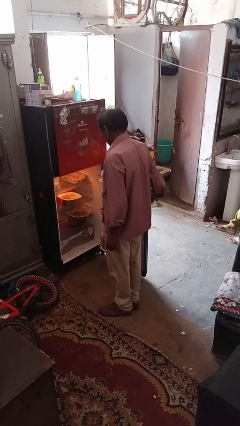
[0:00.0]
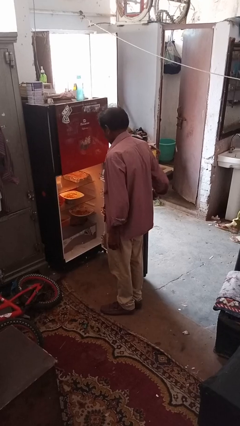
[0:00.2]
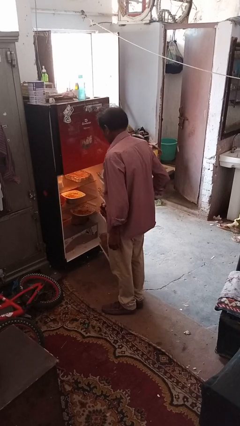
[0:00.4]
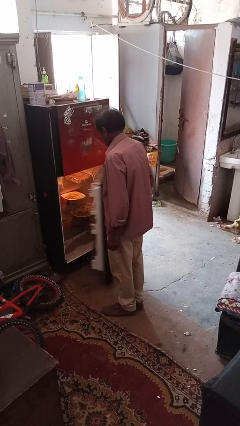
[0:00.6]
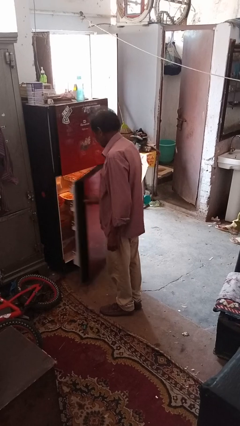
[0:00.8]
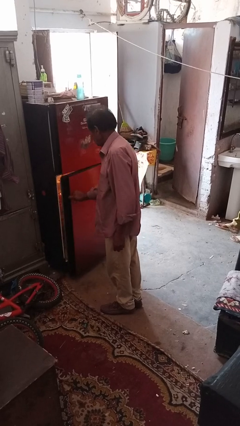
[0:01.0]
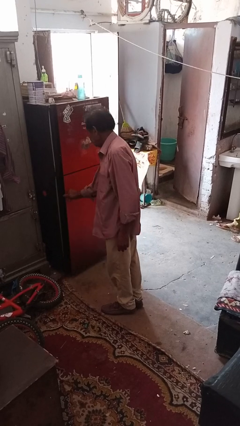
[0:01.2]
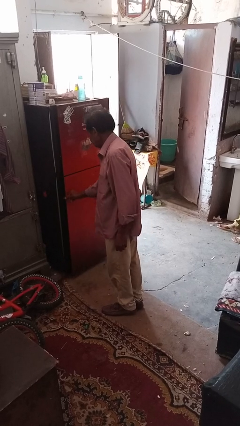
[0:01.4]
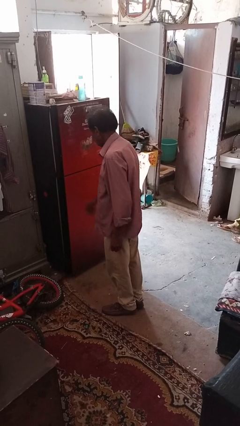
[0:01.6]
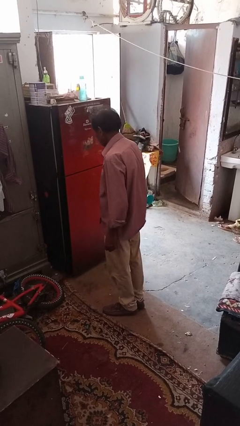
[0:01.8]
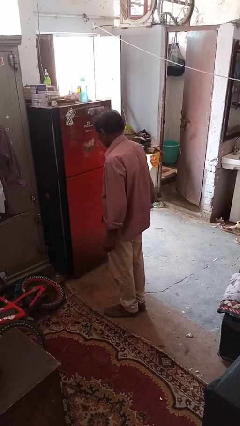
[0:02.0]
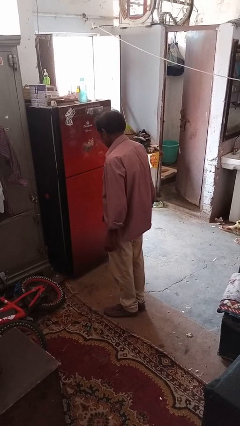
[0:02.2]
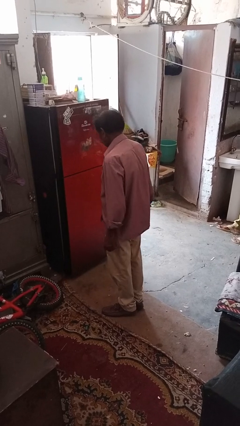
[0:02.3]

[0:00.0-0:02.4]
person closes refrigerator

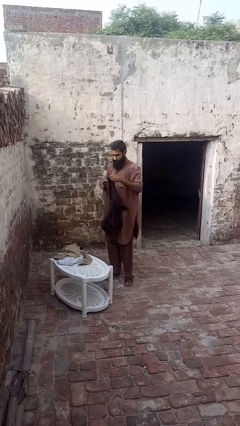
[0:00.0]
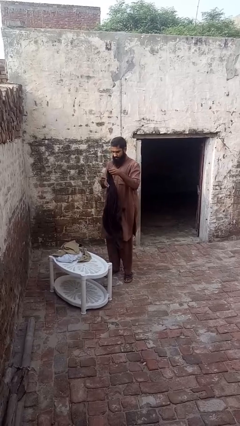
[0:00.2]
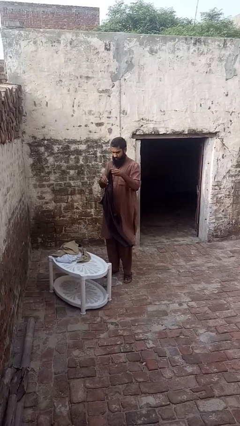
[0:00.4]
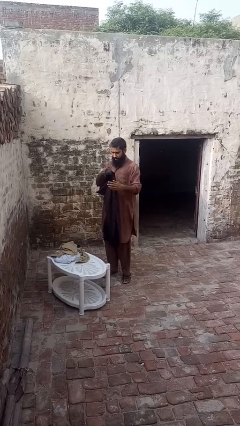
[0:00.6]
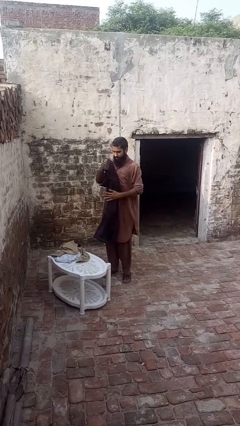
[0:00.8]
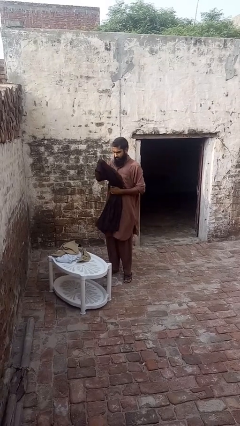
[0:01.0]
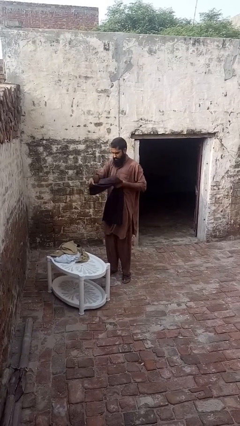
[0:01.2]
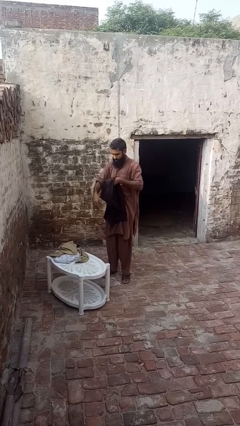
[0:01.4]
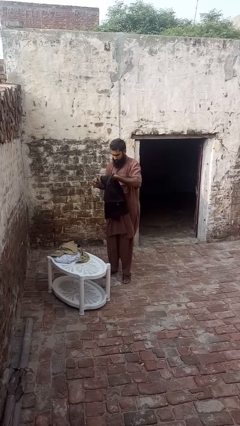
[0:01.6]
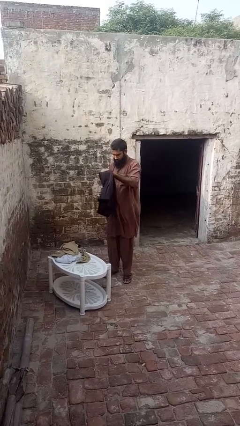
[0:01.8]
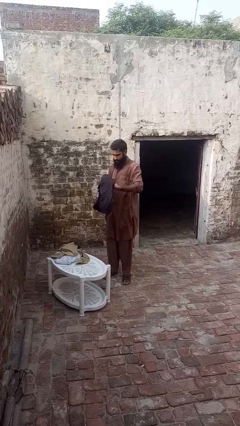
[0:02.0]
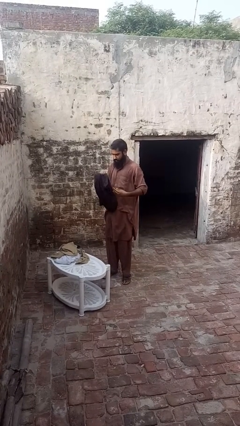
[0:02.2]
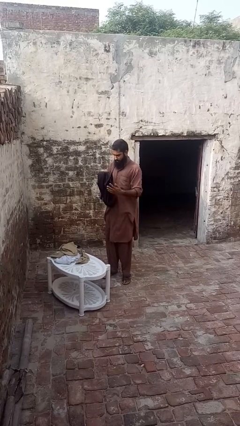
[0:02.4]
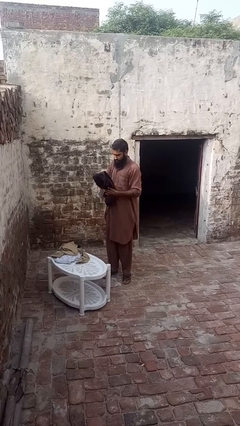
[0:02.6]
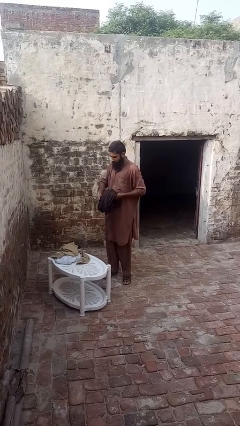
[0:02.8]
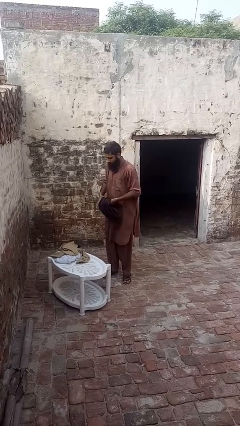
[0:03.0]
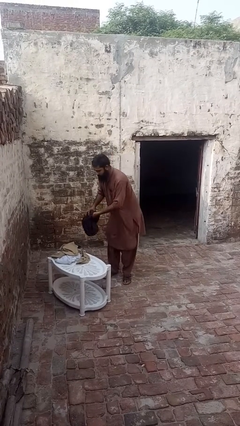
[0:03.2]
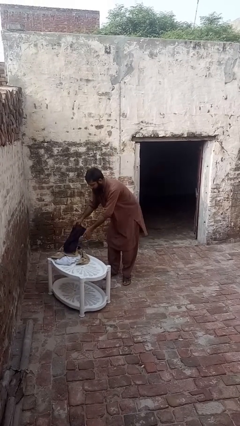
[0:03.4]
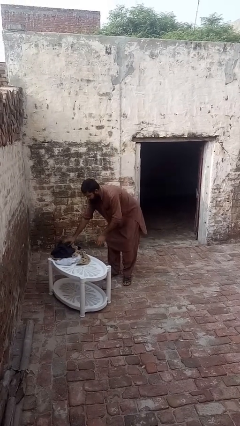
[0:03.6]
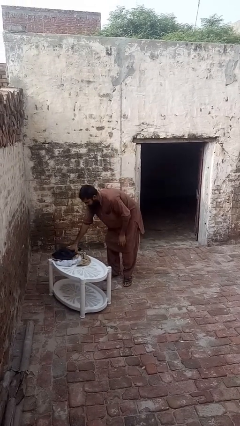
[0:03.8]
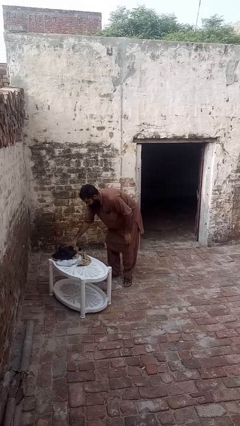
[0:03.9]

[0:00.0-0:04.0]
person folds pants

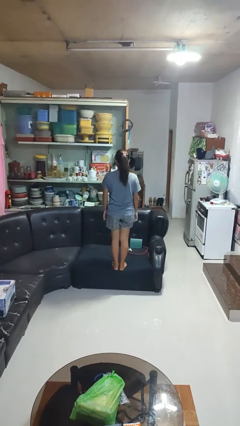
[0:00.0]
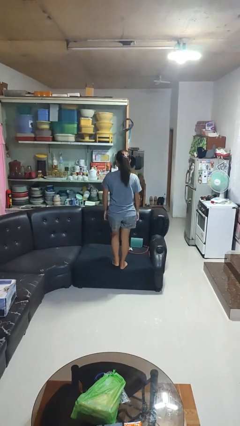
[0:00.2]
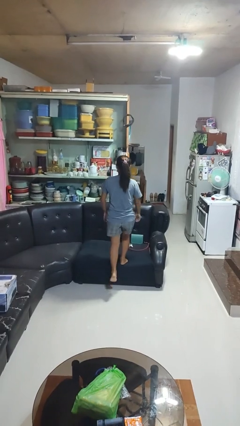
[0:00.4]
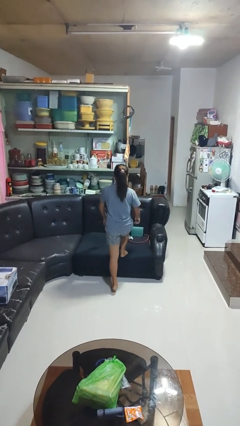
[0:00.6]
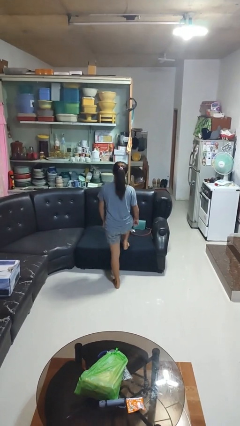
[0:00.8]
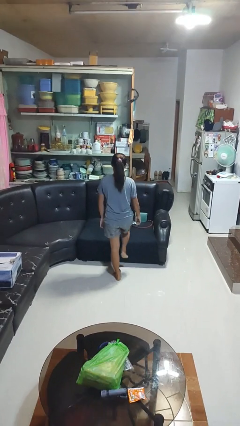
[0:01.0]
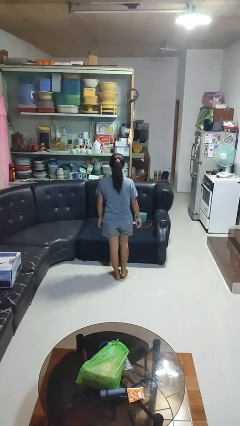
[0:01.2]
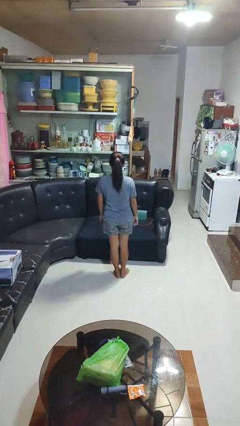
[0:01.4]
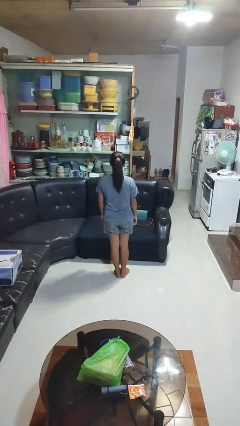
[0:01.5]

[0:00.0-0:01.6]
person climbs off couch

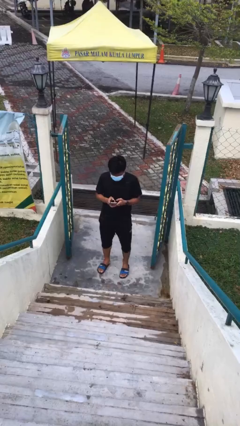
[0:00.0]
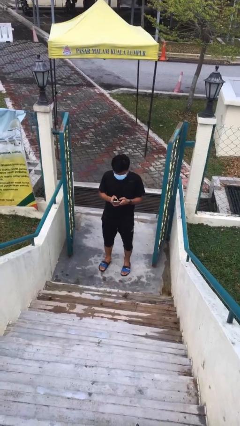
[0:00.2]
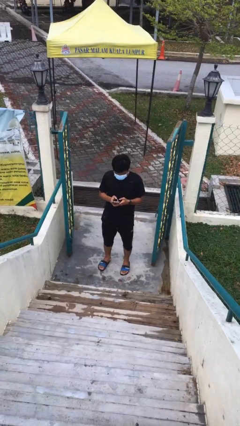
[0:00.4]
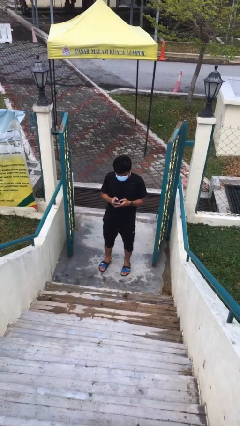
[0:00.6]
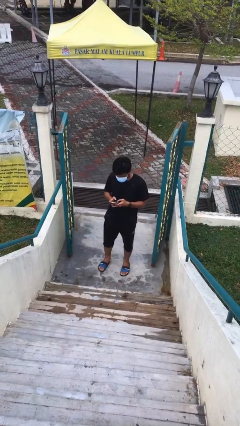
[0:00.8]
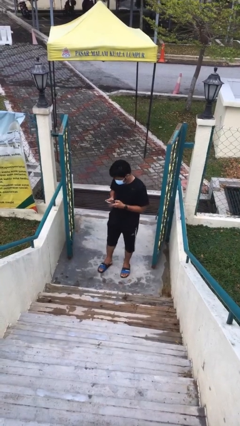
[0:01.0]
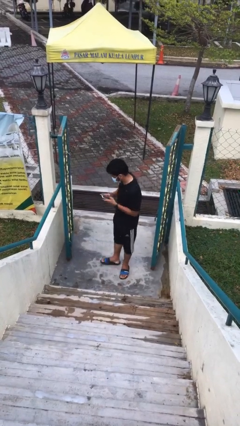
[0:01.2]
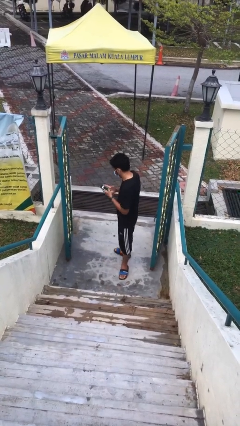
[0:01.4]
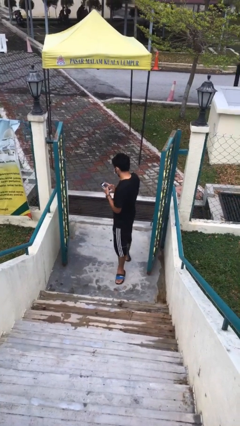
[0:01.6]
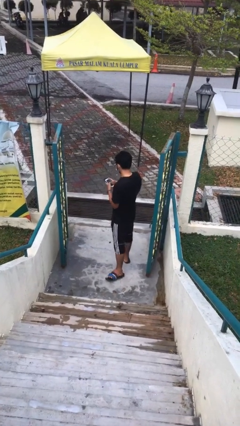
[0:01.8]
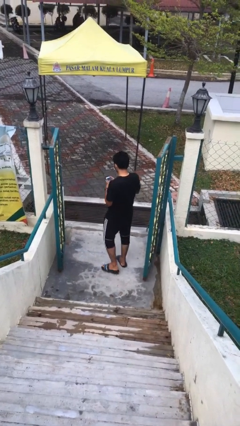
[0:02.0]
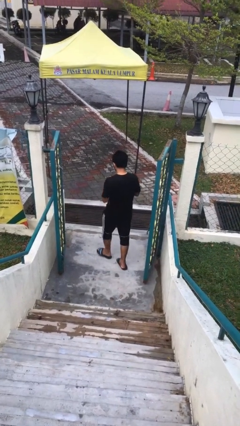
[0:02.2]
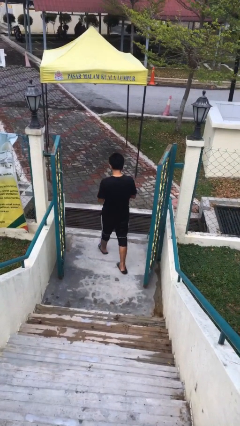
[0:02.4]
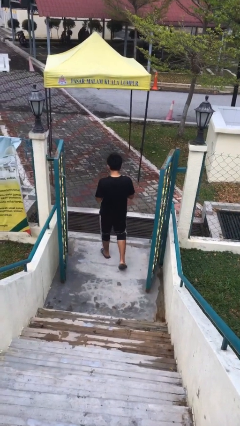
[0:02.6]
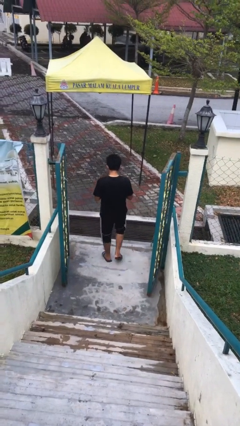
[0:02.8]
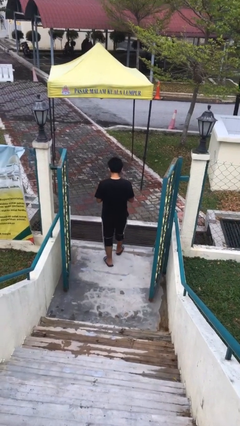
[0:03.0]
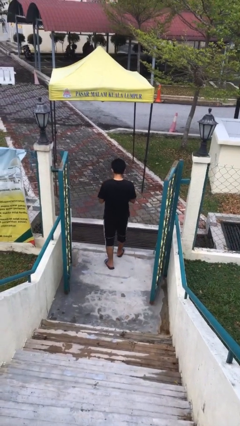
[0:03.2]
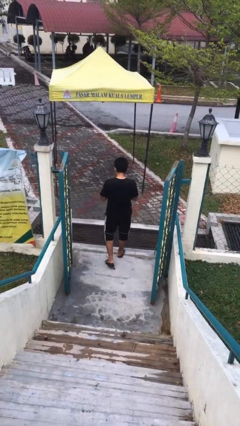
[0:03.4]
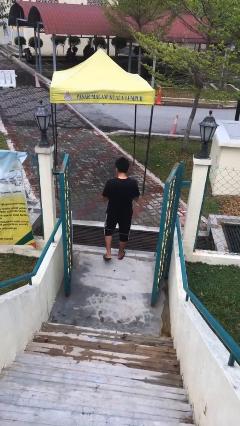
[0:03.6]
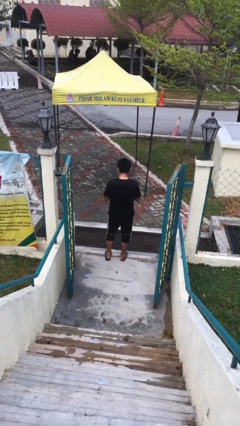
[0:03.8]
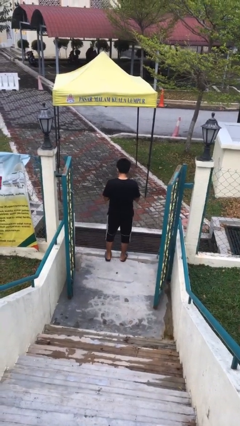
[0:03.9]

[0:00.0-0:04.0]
person exits scene through structure

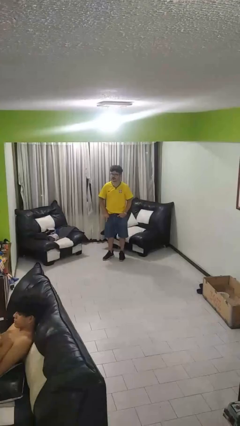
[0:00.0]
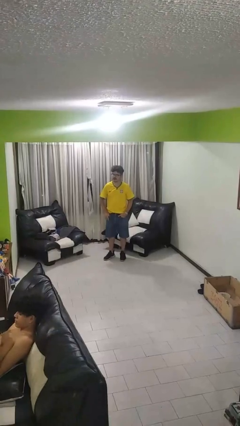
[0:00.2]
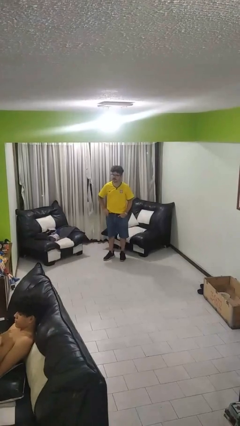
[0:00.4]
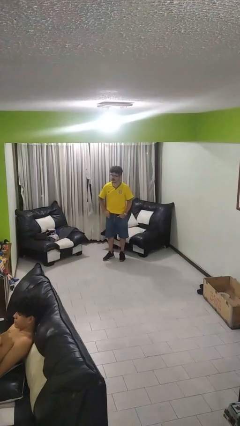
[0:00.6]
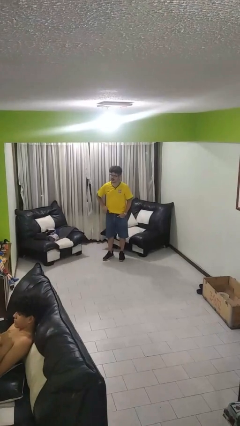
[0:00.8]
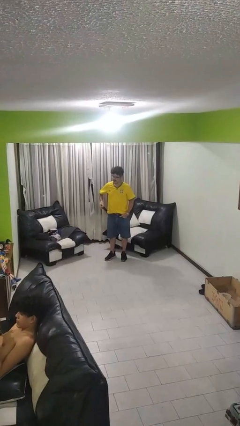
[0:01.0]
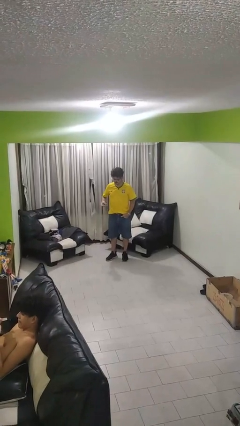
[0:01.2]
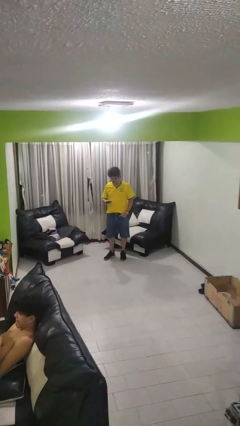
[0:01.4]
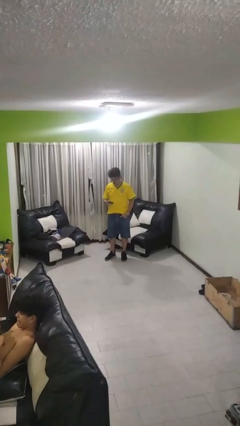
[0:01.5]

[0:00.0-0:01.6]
person takes phone from pocket

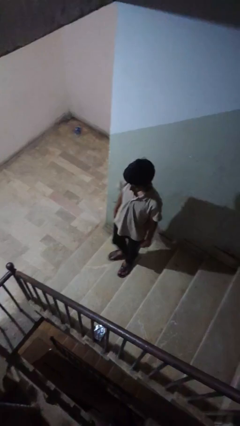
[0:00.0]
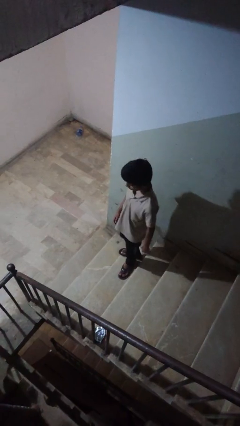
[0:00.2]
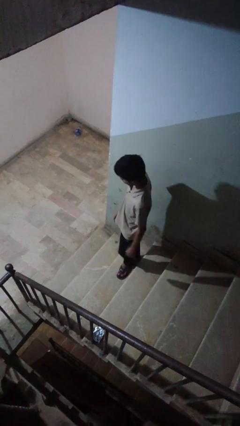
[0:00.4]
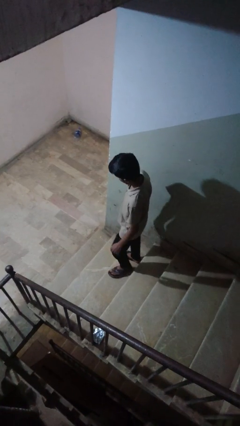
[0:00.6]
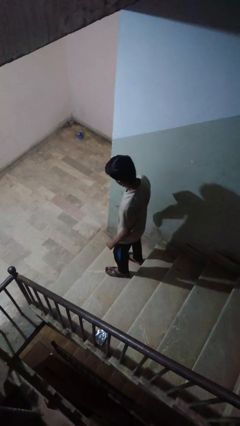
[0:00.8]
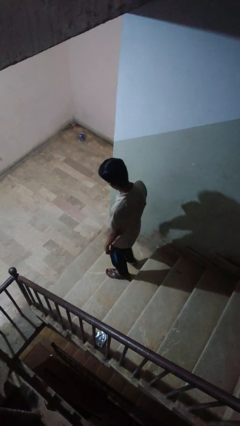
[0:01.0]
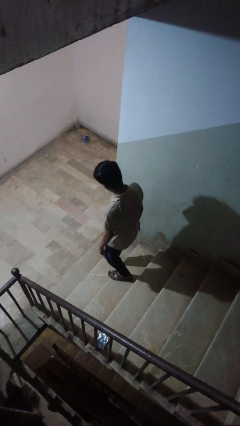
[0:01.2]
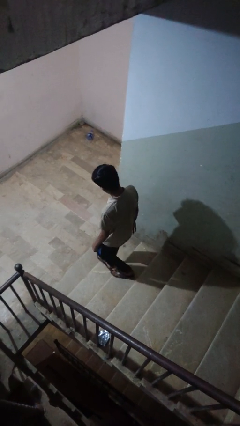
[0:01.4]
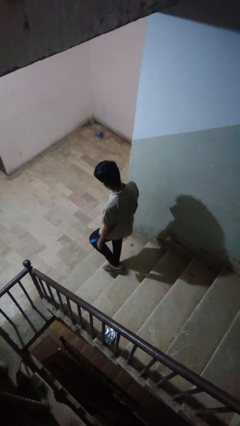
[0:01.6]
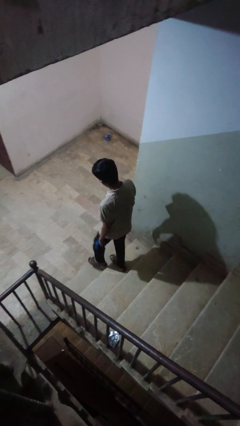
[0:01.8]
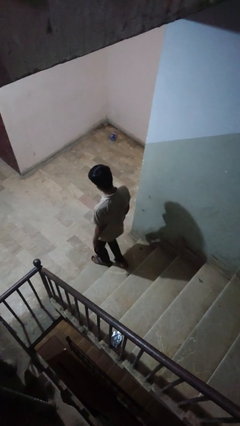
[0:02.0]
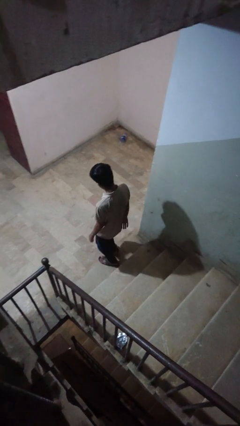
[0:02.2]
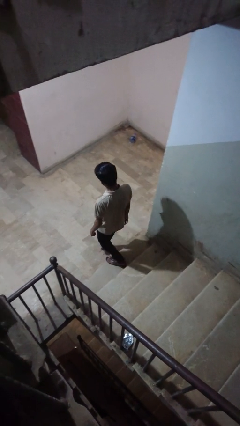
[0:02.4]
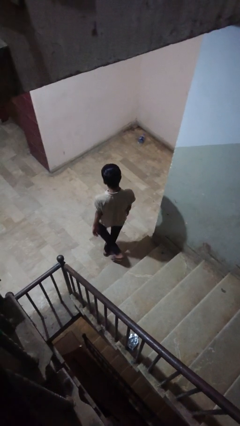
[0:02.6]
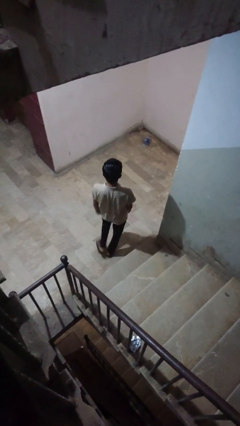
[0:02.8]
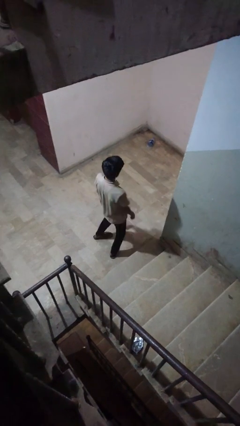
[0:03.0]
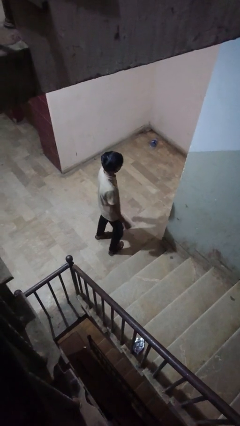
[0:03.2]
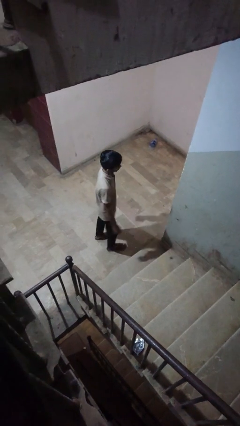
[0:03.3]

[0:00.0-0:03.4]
person climbs down stairs

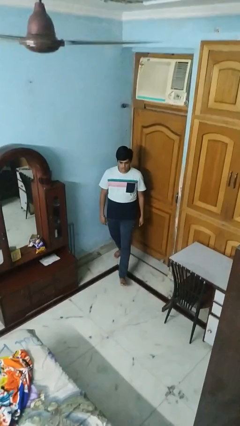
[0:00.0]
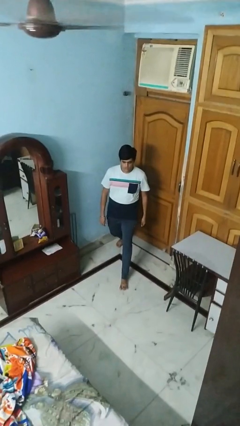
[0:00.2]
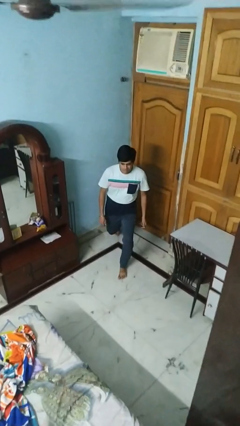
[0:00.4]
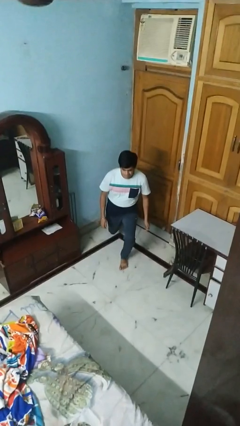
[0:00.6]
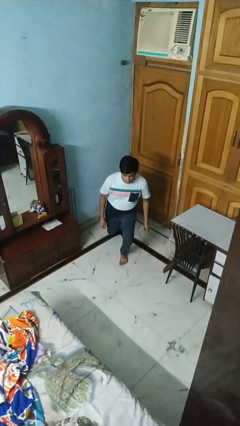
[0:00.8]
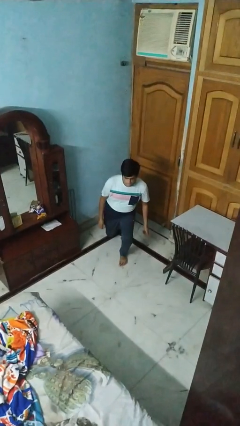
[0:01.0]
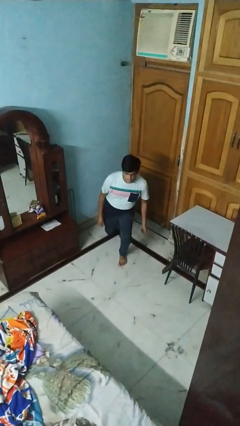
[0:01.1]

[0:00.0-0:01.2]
person exercises with lunges
